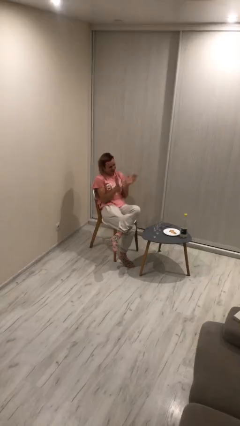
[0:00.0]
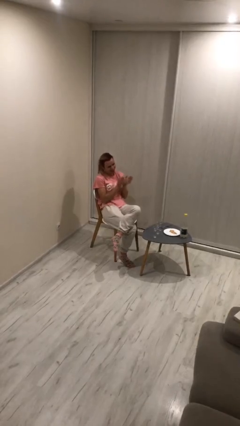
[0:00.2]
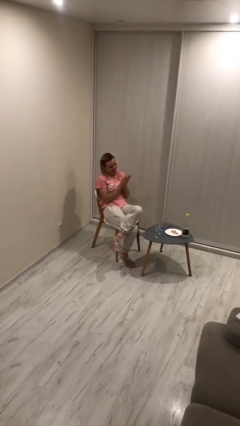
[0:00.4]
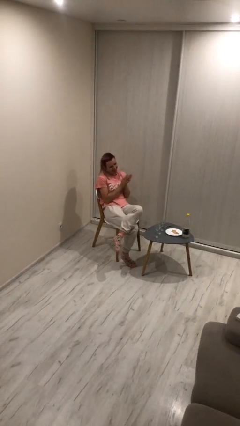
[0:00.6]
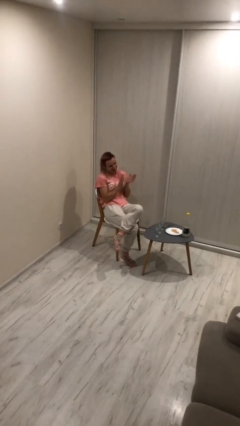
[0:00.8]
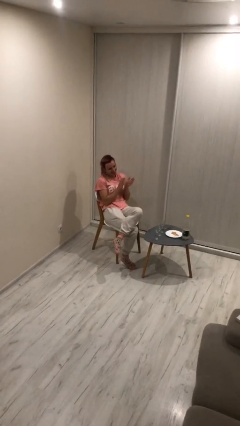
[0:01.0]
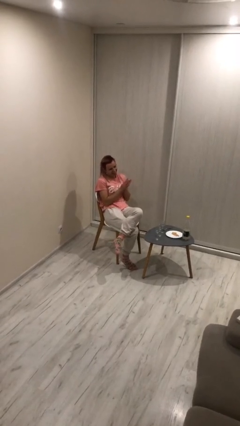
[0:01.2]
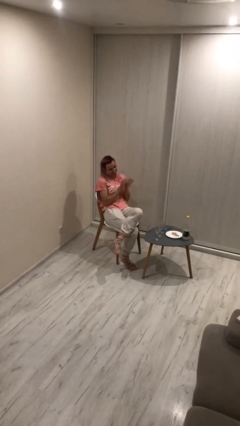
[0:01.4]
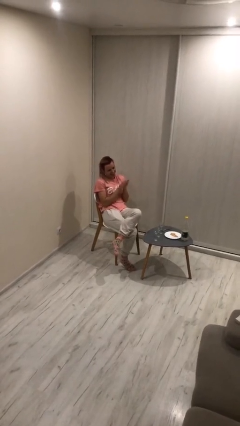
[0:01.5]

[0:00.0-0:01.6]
person claps hands

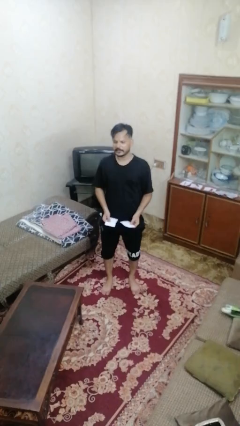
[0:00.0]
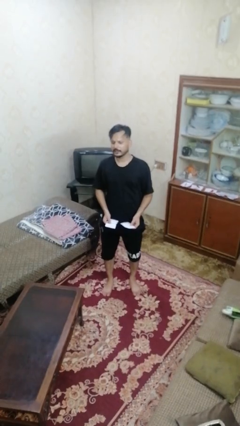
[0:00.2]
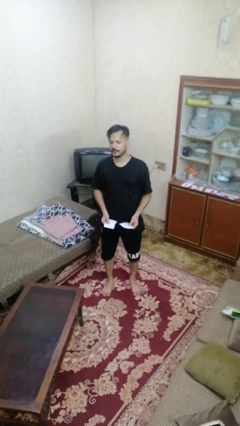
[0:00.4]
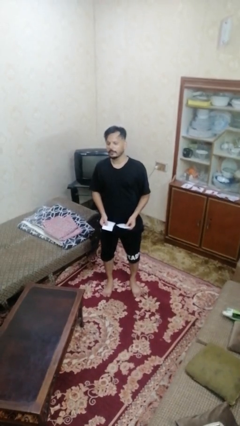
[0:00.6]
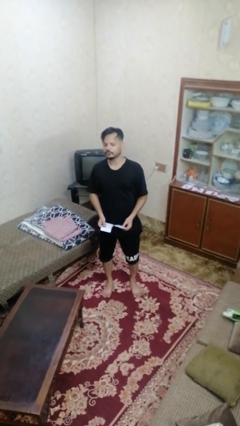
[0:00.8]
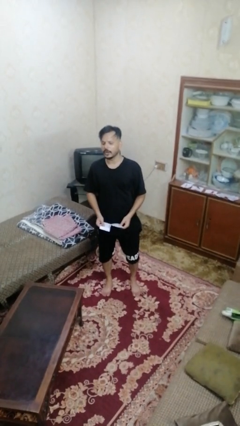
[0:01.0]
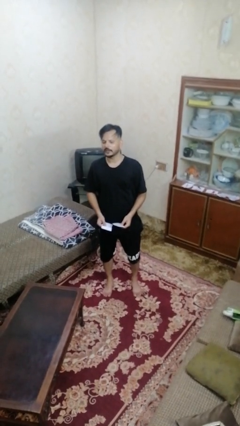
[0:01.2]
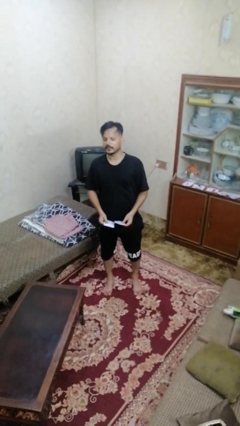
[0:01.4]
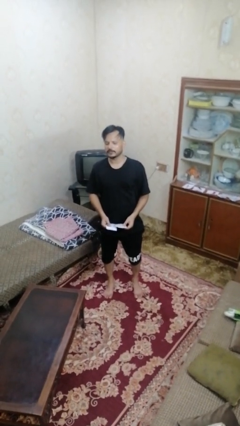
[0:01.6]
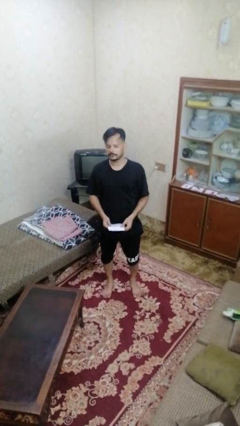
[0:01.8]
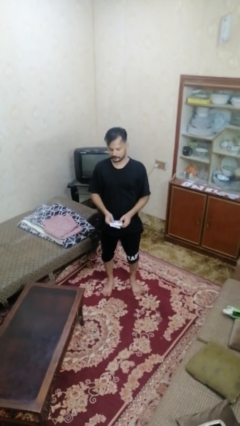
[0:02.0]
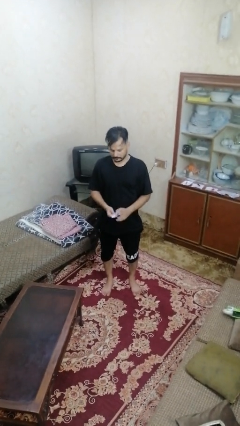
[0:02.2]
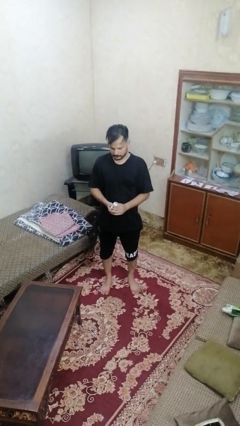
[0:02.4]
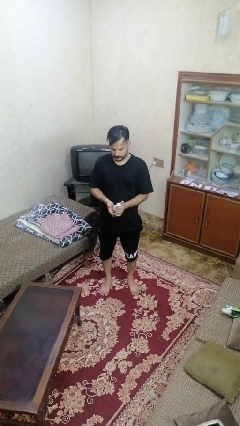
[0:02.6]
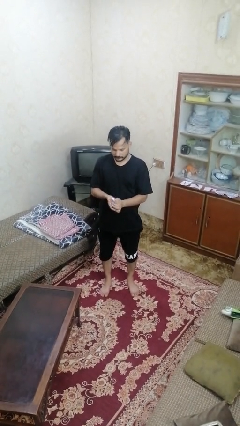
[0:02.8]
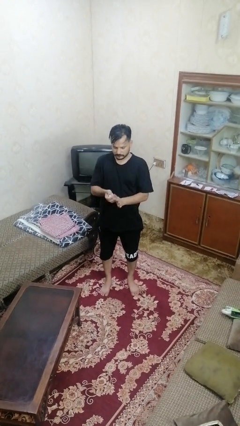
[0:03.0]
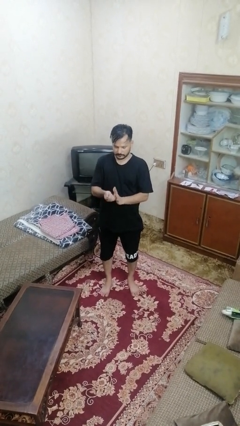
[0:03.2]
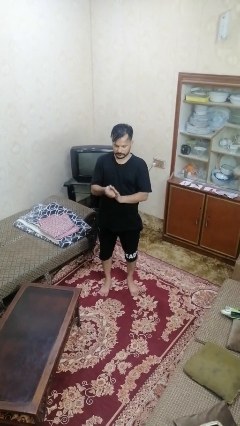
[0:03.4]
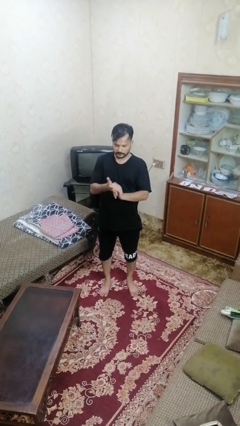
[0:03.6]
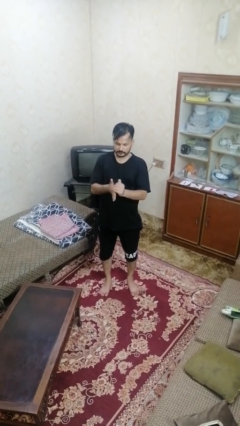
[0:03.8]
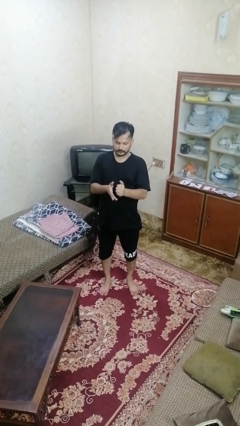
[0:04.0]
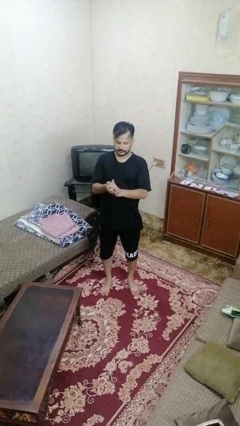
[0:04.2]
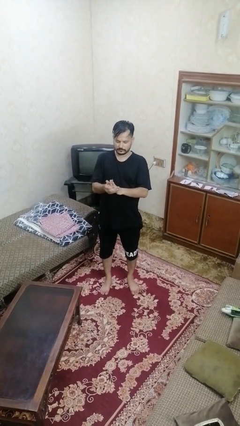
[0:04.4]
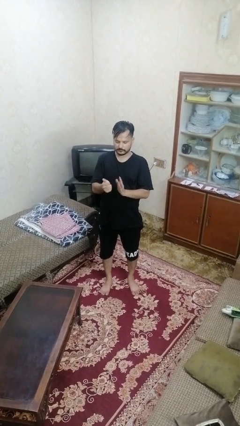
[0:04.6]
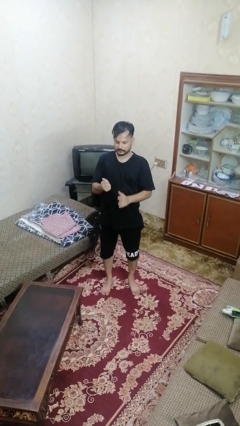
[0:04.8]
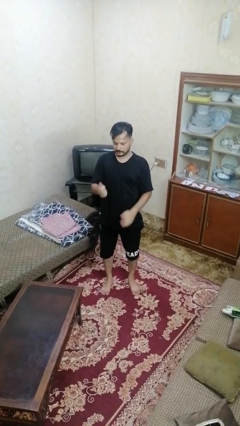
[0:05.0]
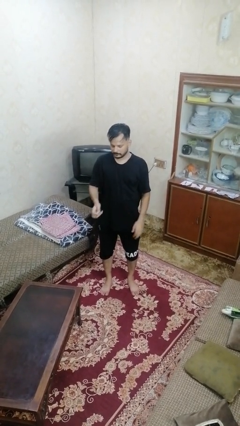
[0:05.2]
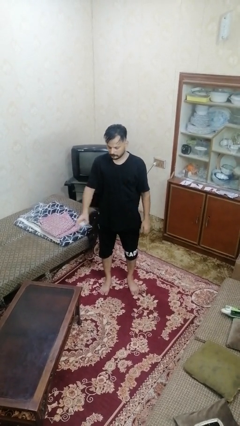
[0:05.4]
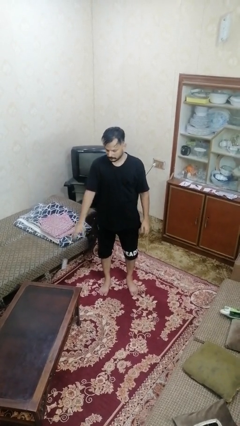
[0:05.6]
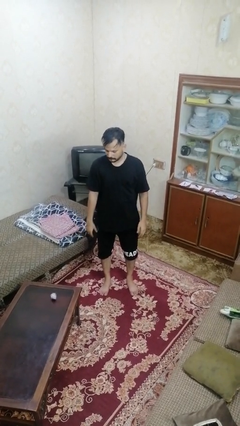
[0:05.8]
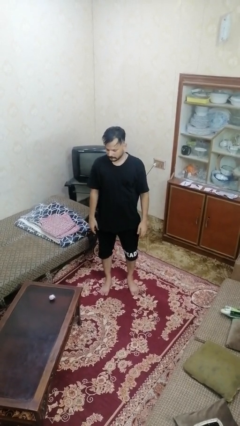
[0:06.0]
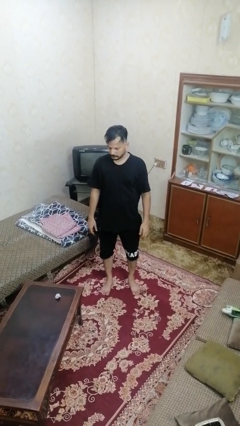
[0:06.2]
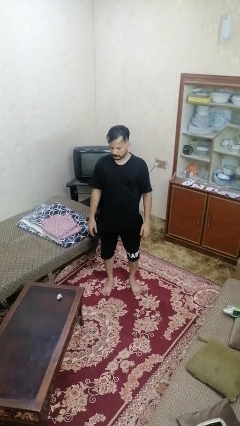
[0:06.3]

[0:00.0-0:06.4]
person crumples paper

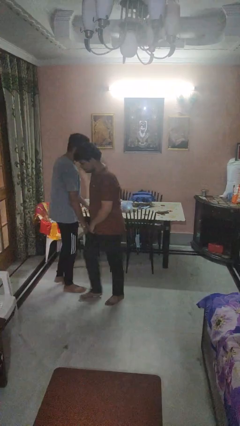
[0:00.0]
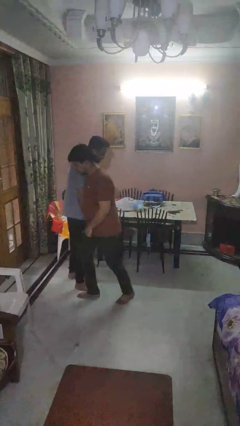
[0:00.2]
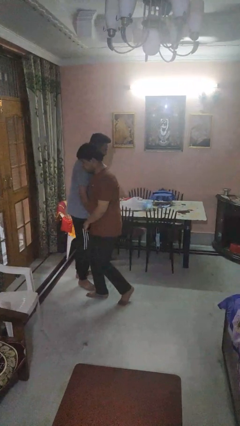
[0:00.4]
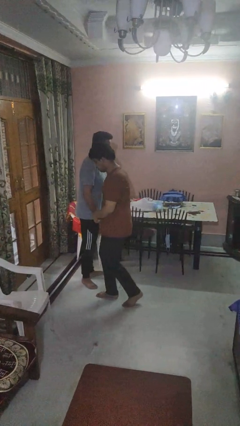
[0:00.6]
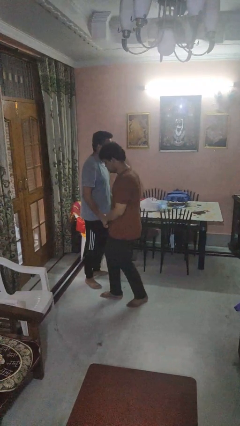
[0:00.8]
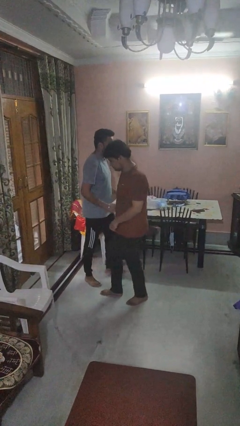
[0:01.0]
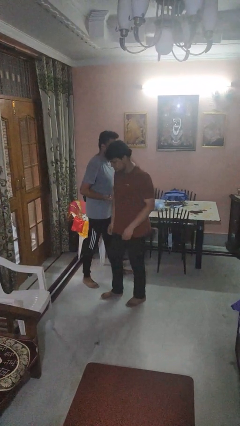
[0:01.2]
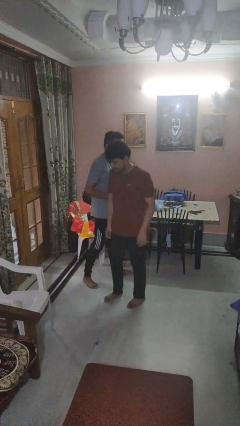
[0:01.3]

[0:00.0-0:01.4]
person bumps into person

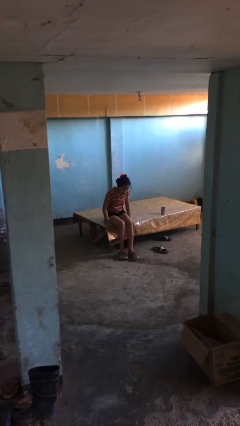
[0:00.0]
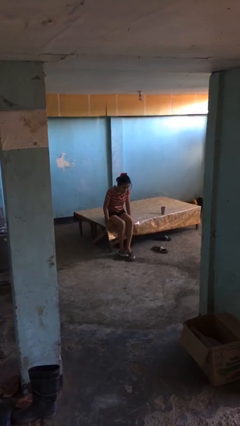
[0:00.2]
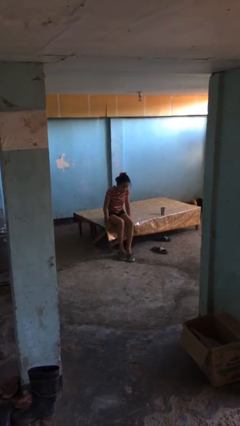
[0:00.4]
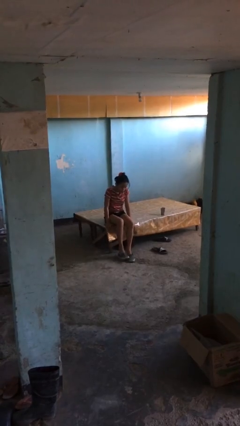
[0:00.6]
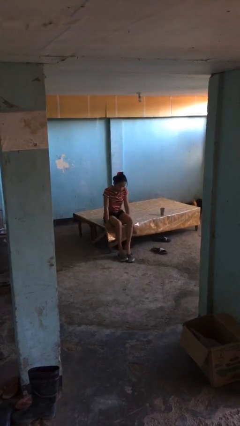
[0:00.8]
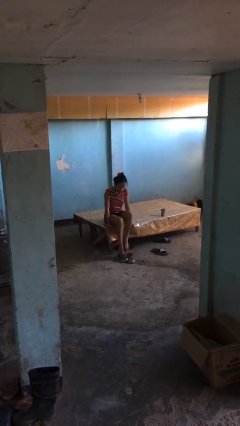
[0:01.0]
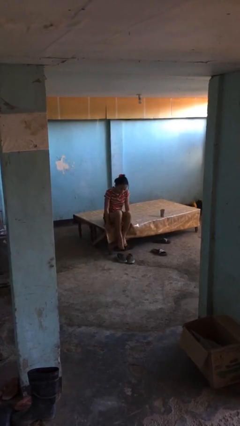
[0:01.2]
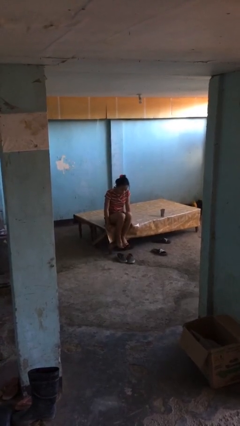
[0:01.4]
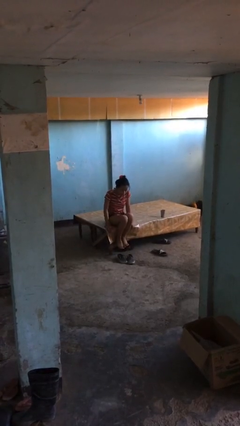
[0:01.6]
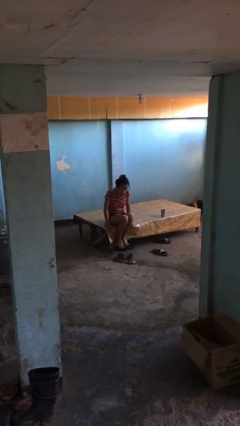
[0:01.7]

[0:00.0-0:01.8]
person takes off shoes

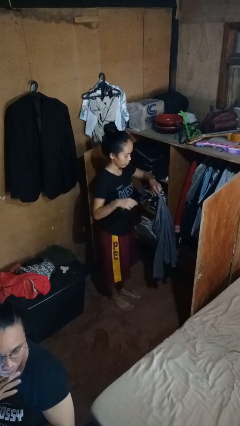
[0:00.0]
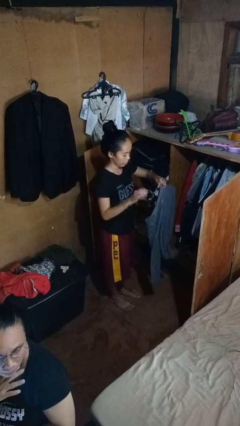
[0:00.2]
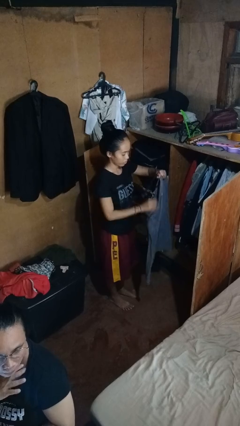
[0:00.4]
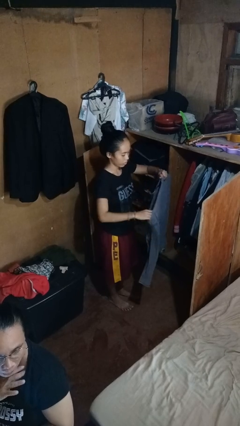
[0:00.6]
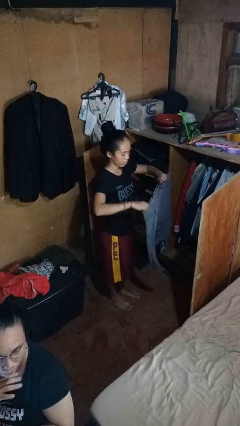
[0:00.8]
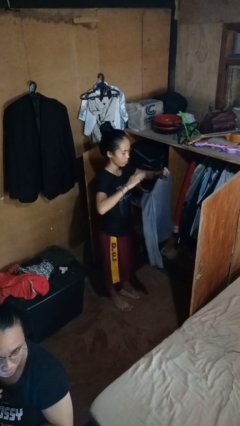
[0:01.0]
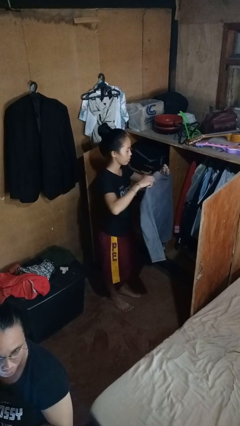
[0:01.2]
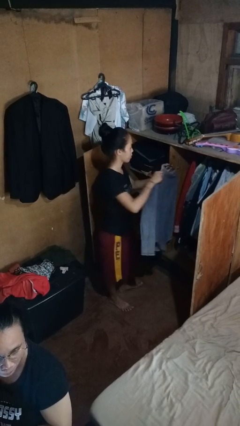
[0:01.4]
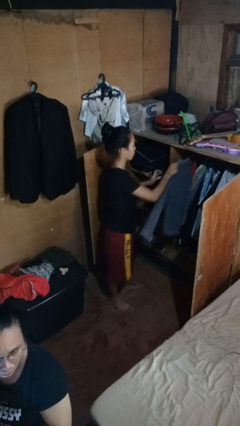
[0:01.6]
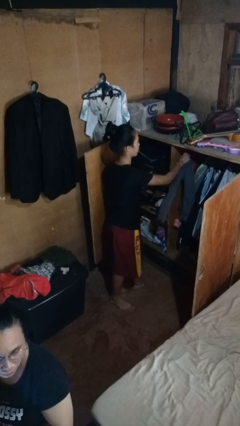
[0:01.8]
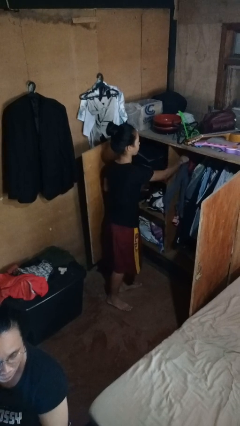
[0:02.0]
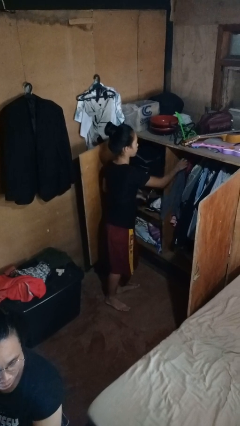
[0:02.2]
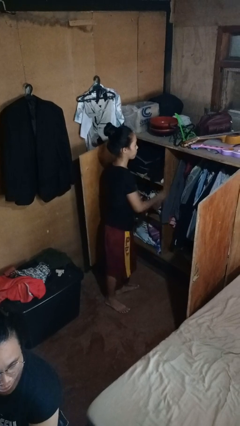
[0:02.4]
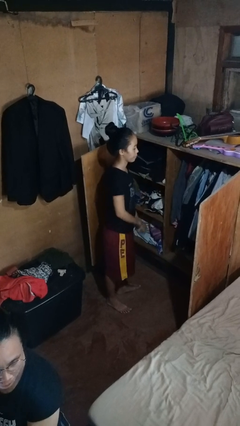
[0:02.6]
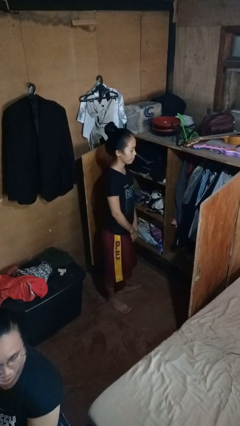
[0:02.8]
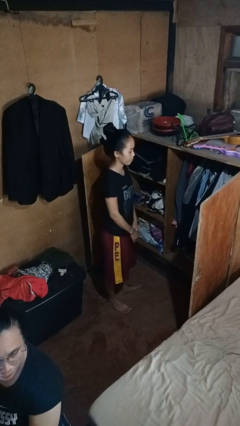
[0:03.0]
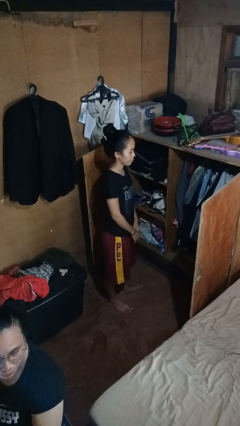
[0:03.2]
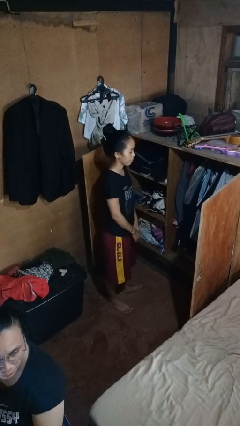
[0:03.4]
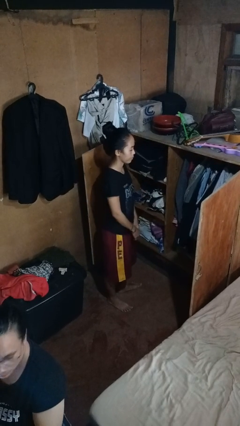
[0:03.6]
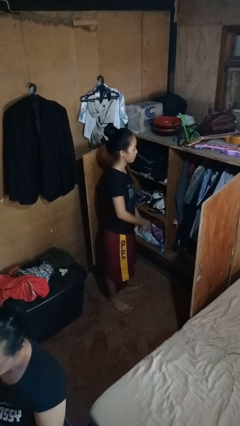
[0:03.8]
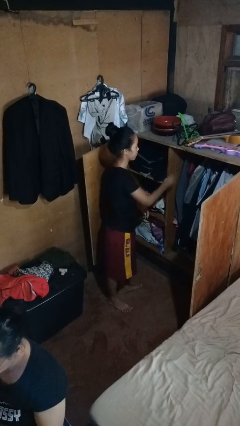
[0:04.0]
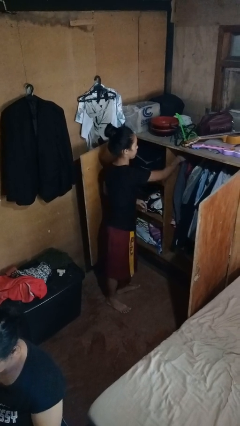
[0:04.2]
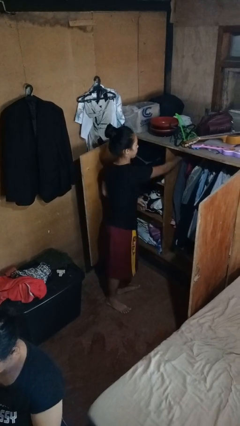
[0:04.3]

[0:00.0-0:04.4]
person puts clothes into closet

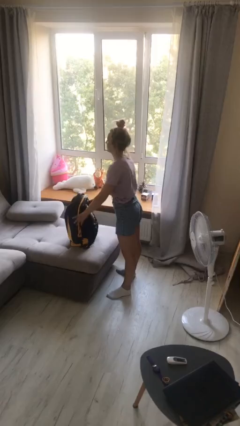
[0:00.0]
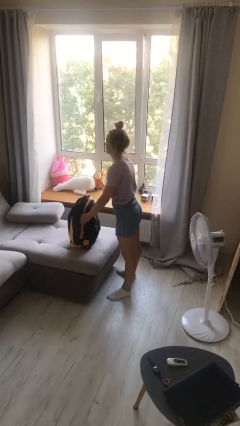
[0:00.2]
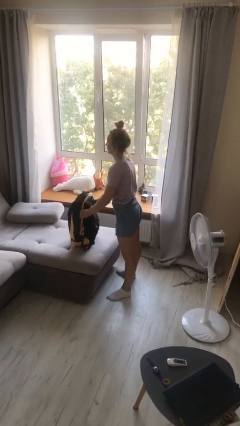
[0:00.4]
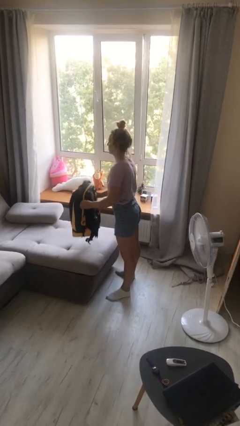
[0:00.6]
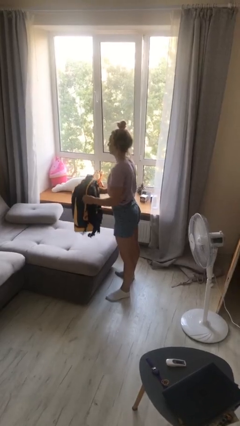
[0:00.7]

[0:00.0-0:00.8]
person picks up object from bed

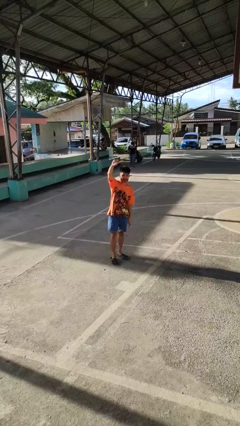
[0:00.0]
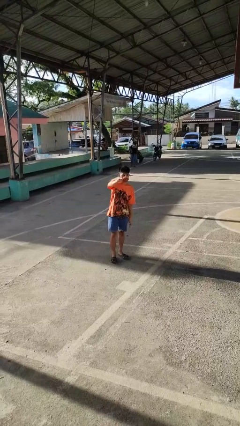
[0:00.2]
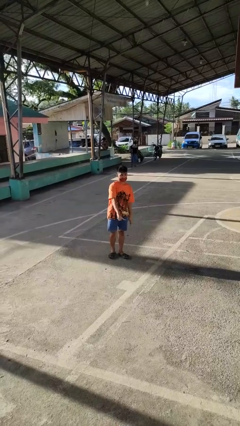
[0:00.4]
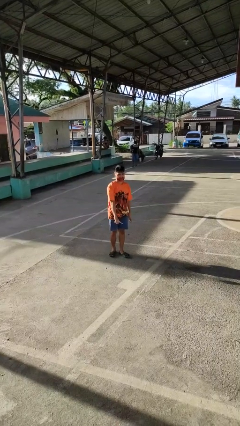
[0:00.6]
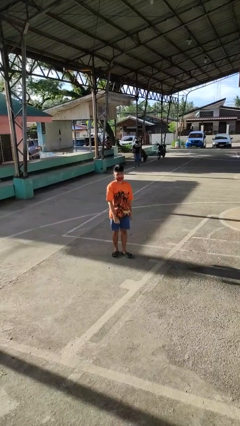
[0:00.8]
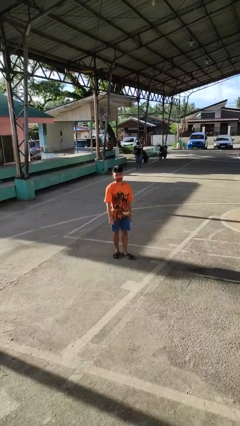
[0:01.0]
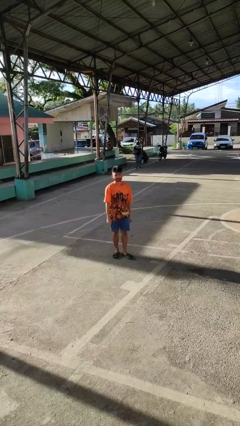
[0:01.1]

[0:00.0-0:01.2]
person gestures swipe down
